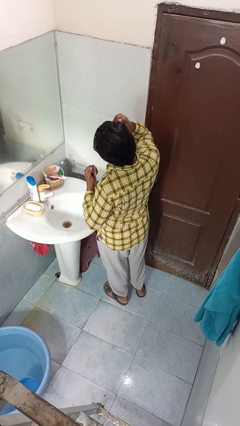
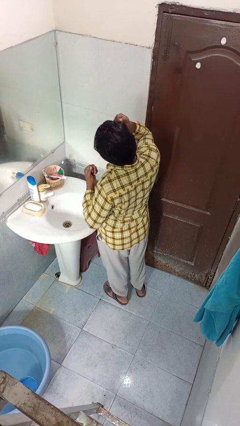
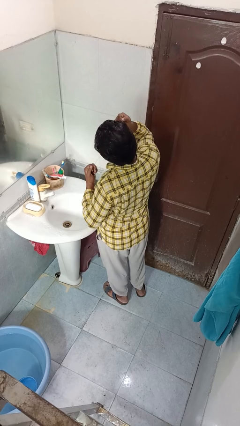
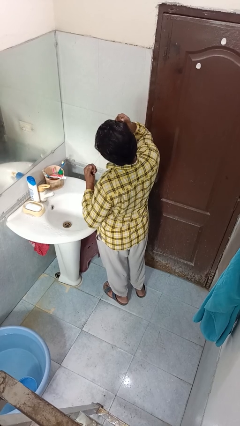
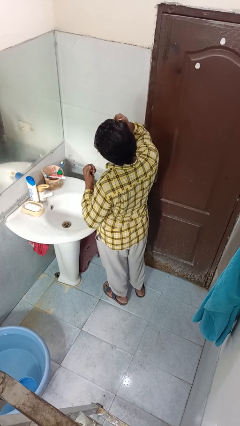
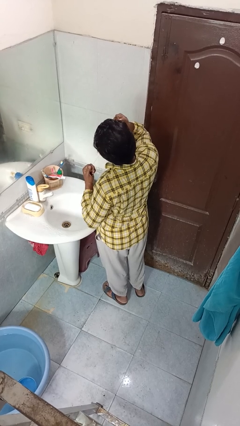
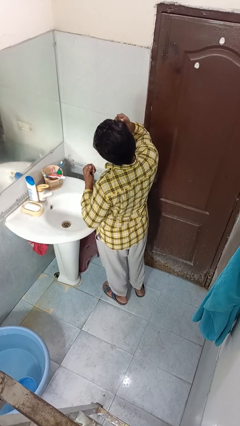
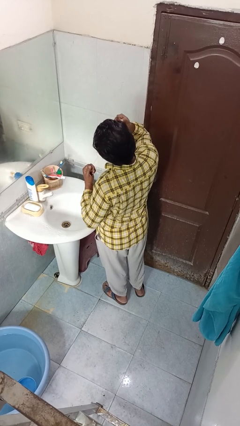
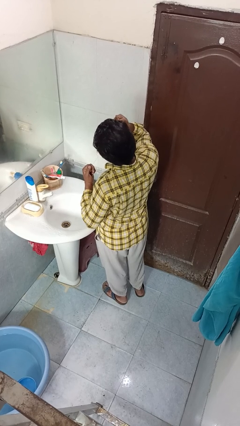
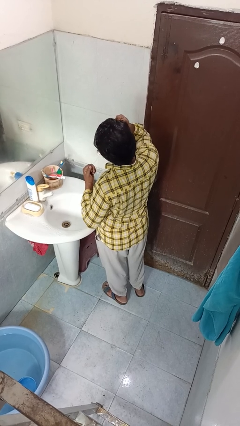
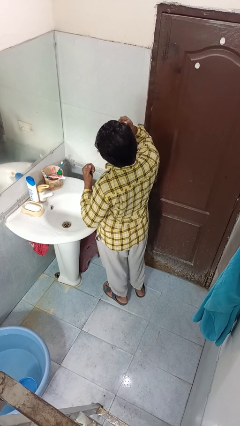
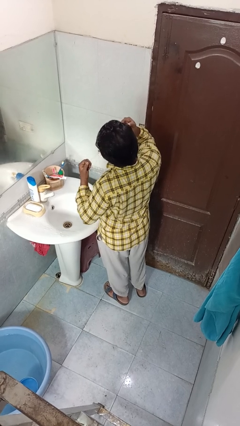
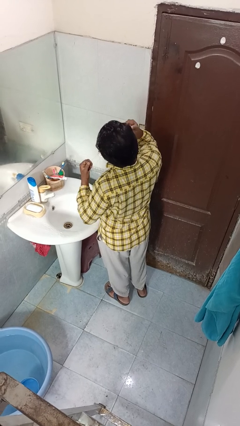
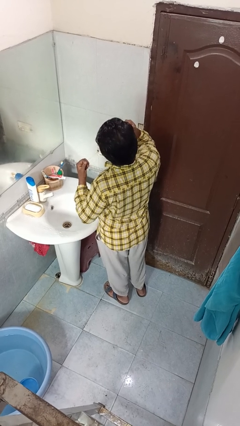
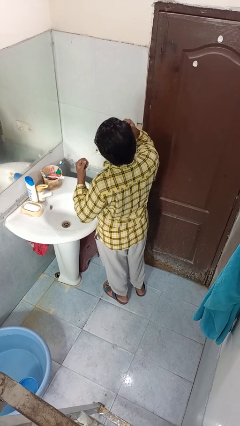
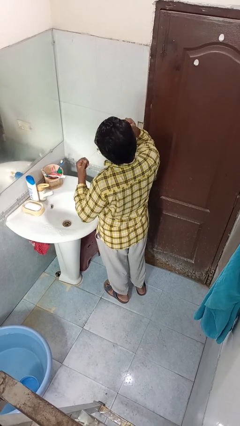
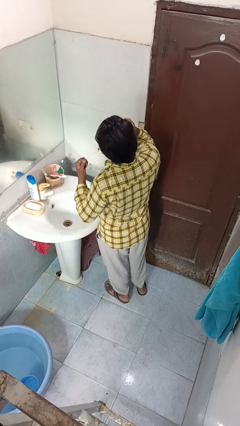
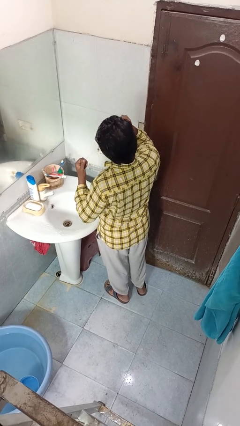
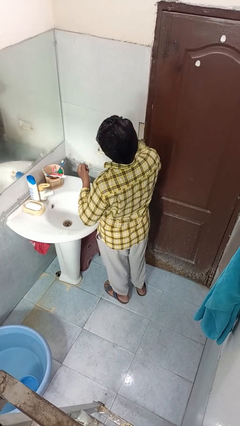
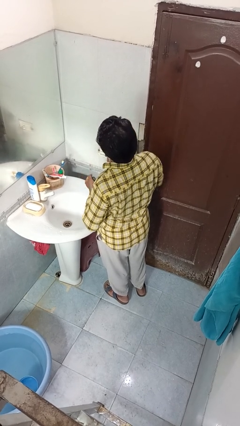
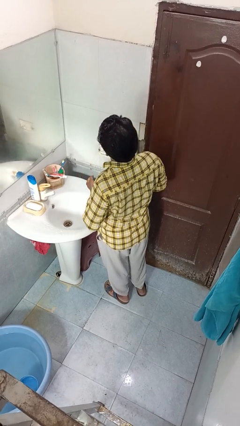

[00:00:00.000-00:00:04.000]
person flosses

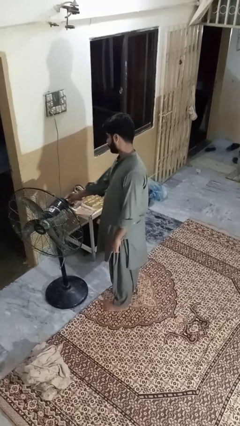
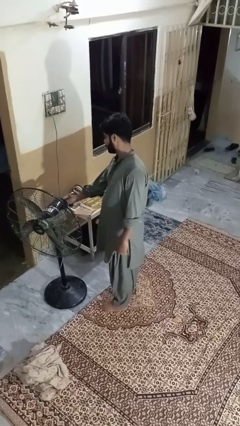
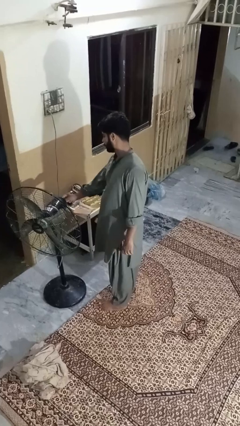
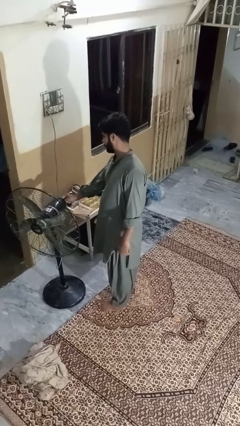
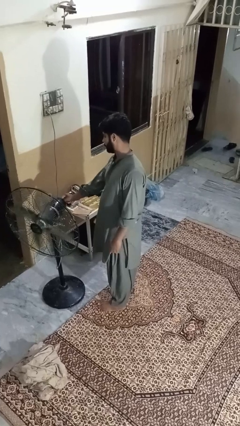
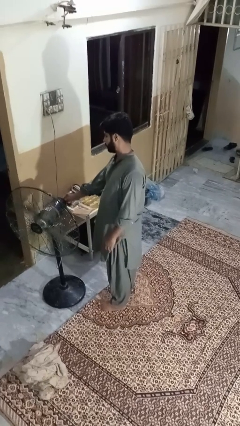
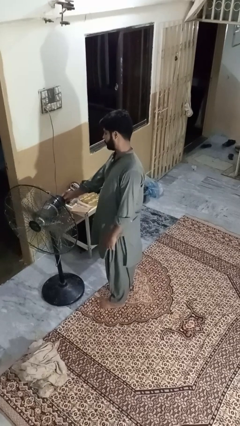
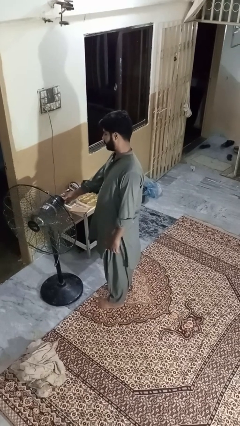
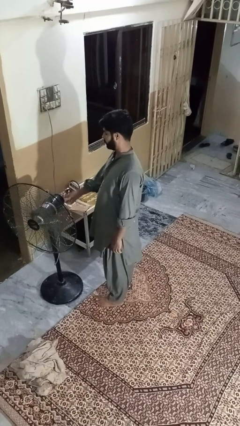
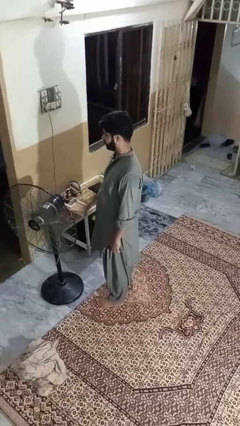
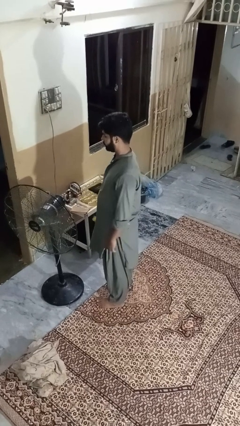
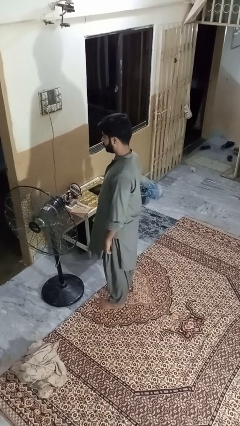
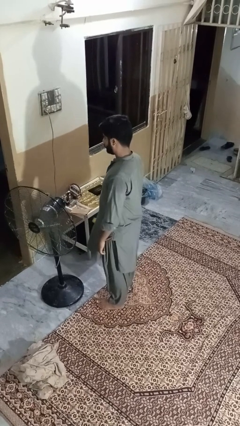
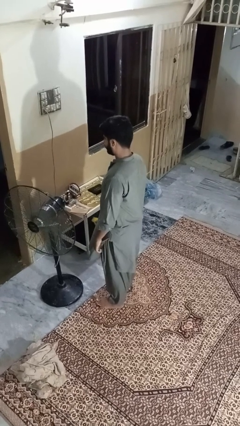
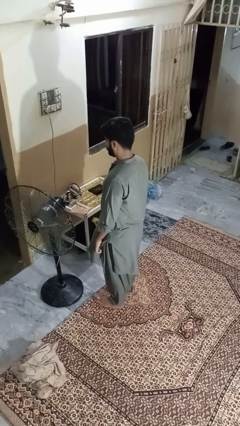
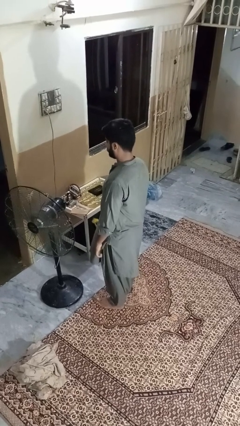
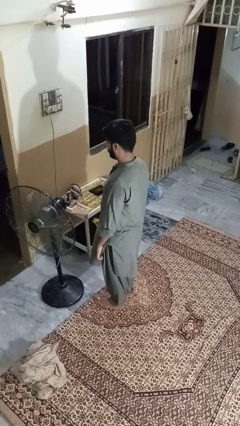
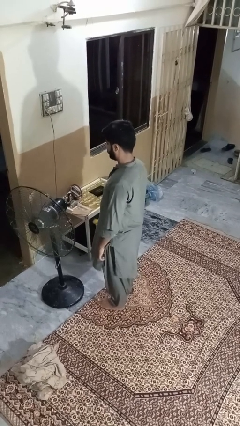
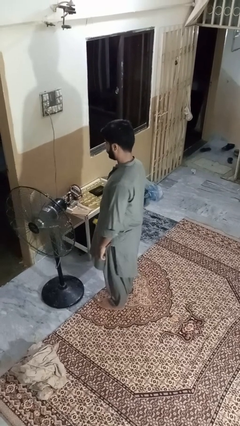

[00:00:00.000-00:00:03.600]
person turns on fan

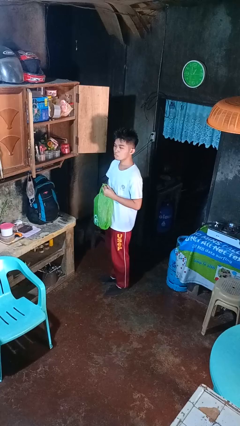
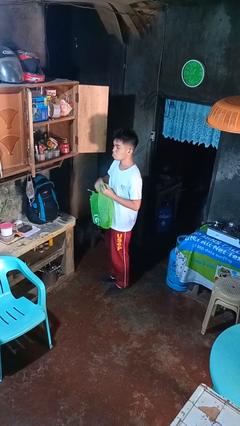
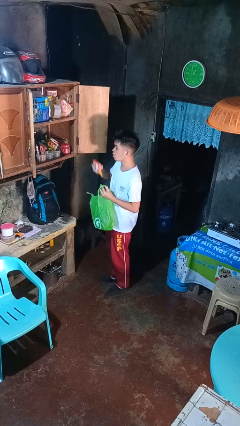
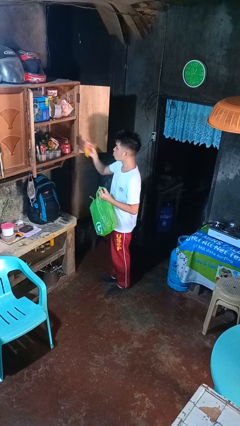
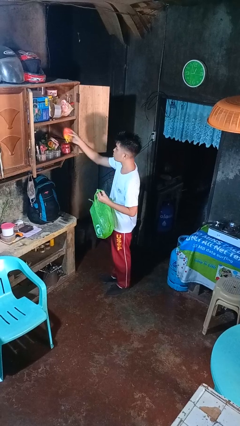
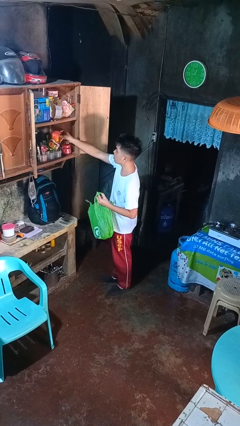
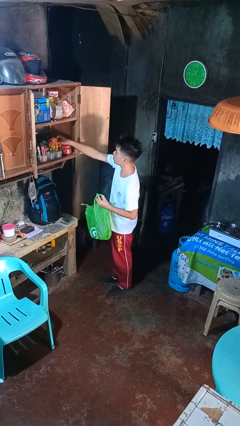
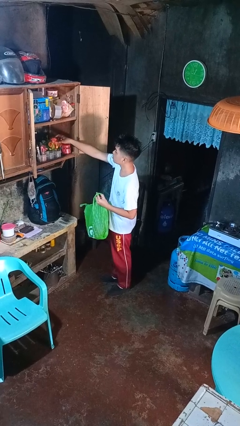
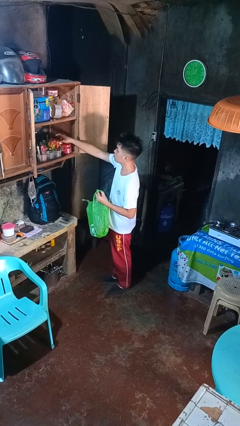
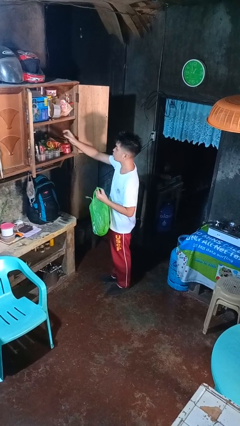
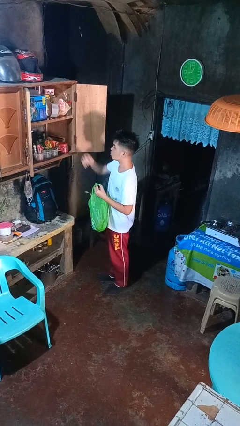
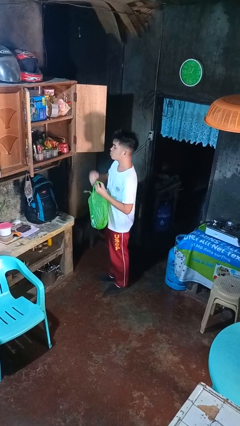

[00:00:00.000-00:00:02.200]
person loads groceries into cabinet

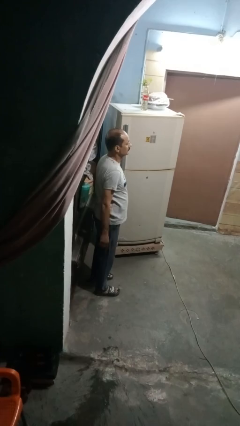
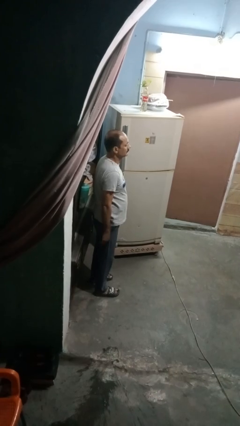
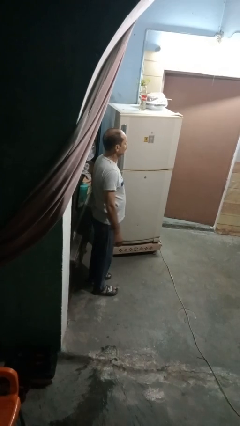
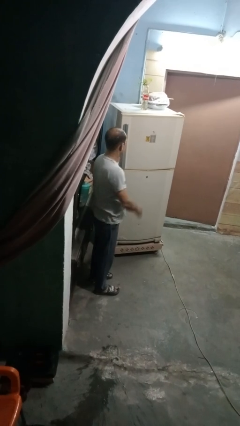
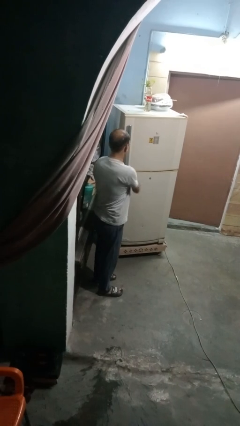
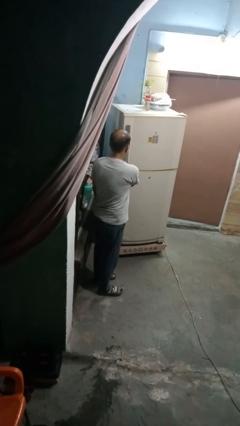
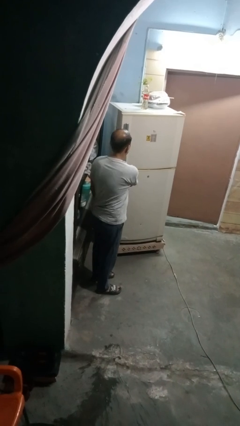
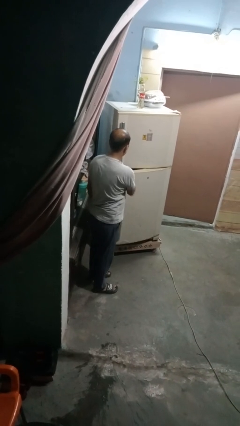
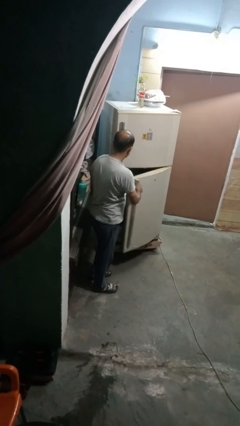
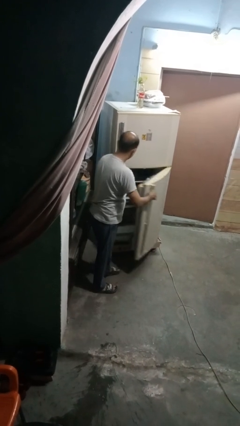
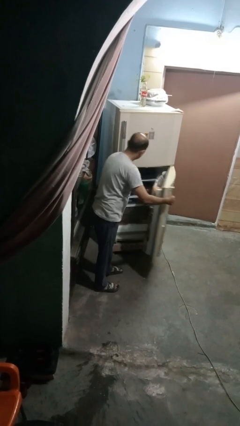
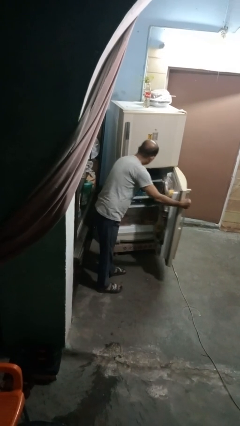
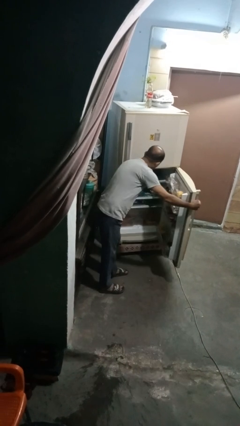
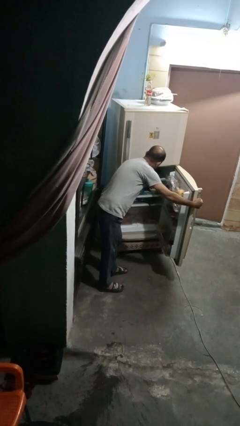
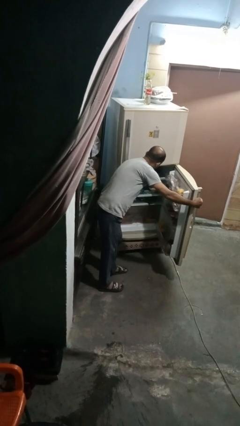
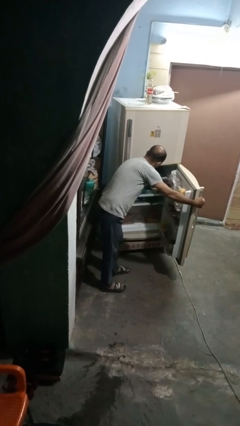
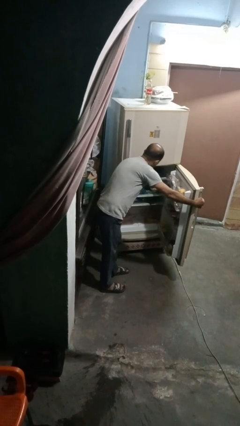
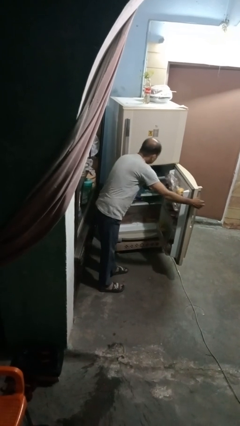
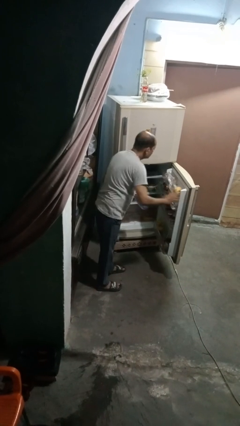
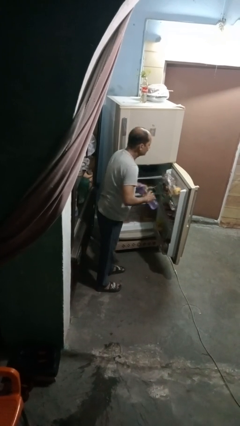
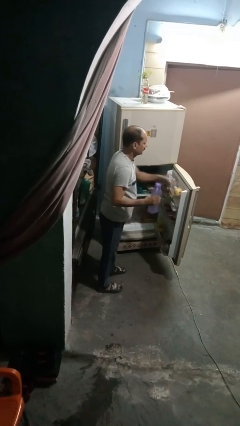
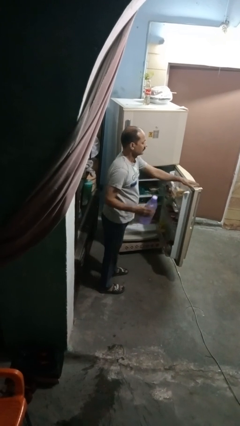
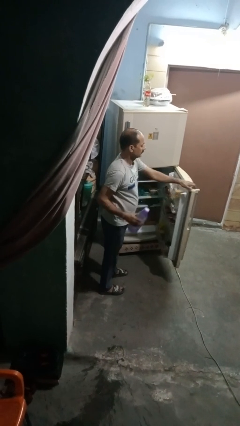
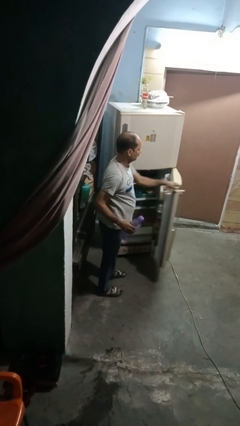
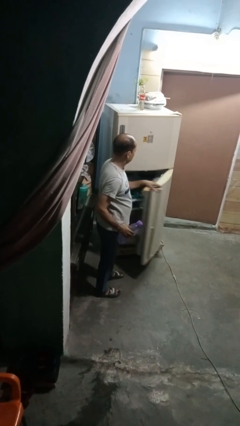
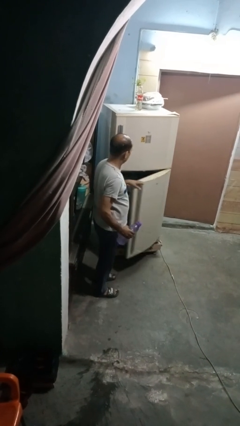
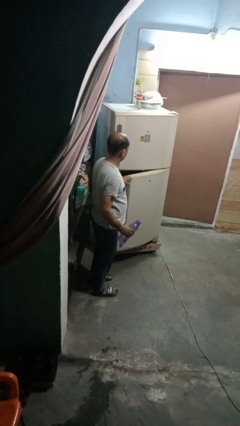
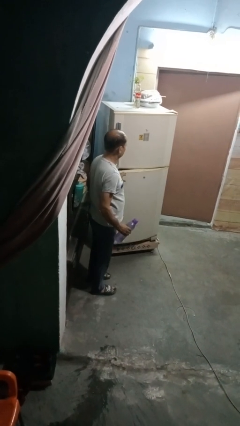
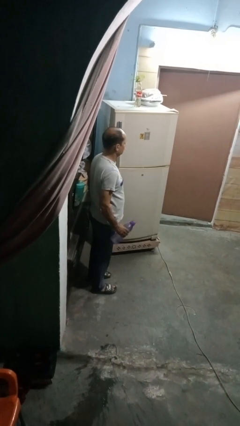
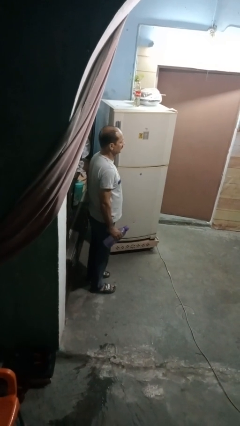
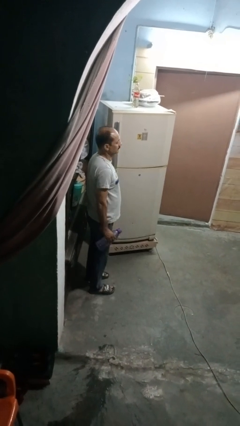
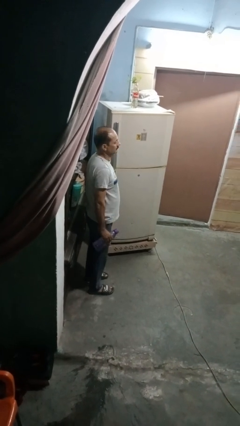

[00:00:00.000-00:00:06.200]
person takes object from refrigerator

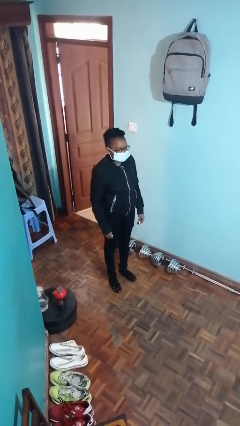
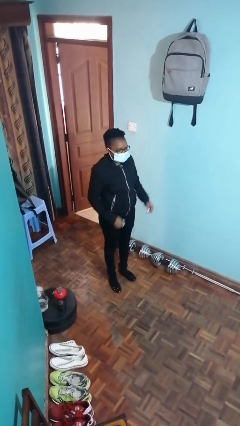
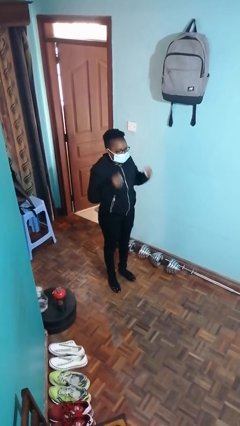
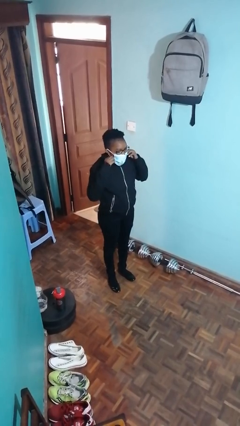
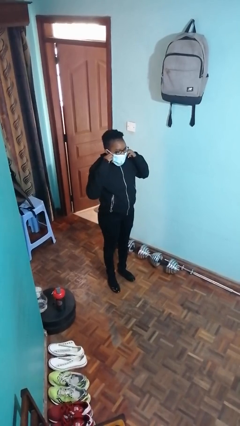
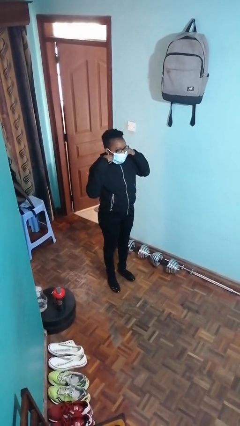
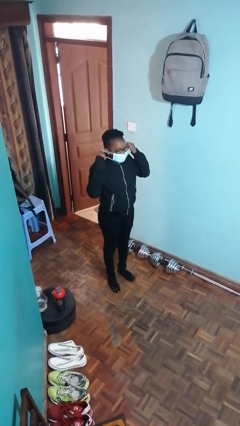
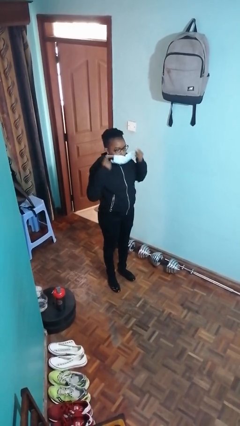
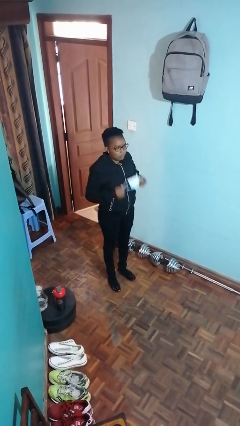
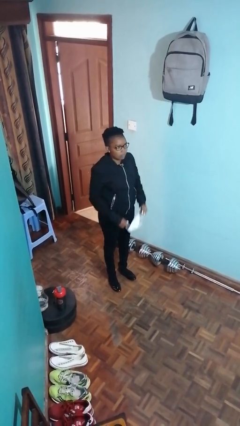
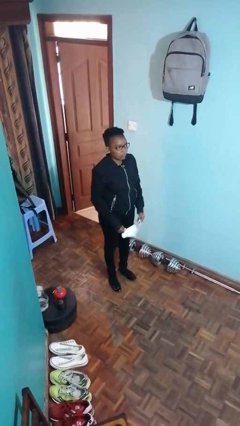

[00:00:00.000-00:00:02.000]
person takes off facemask
